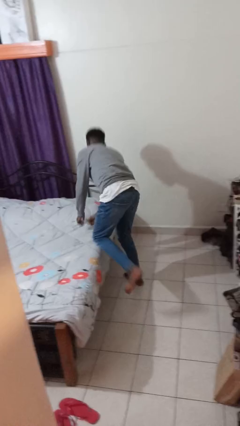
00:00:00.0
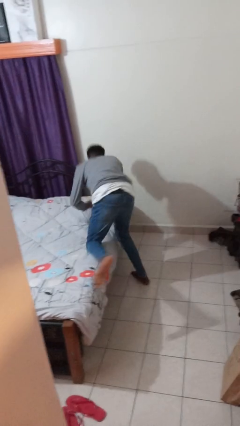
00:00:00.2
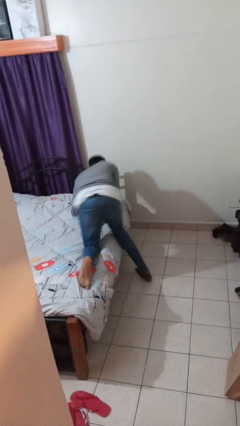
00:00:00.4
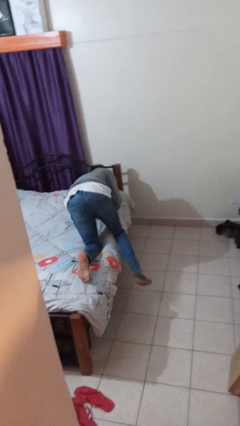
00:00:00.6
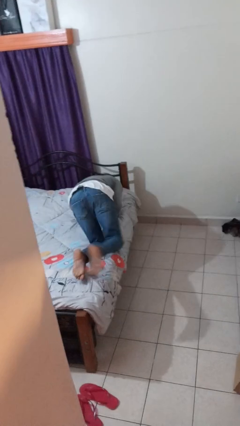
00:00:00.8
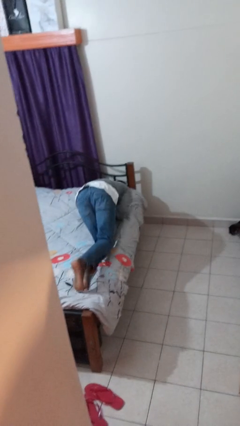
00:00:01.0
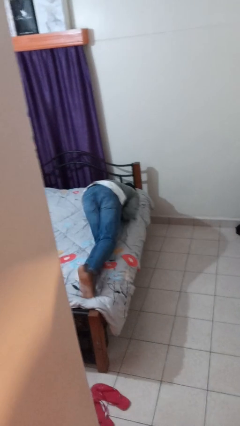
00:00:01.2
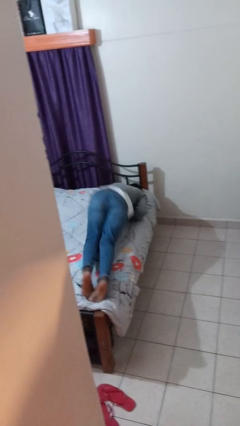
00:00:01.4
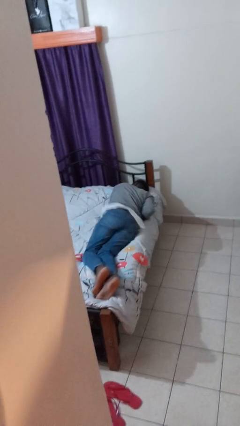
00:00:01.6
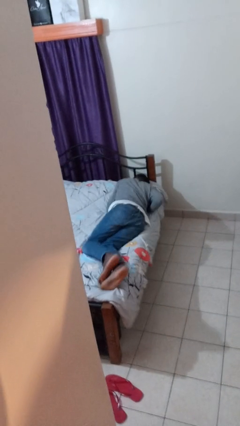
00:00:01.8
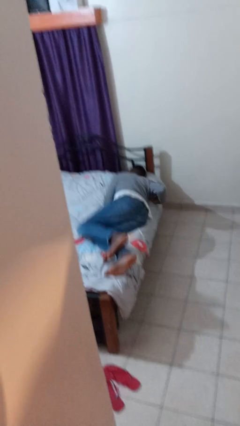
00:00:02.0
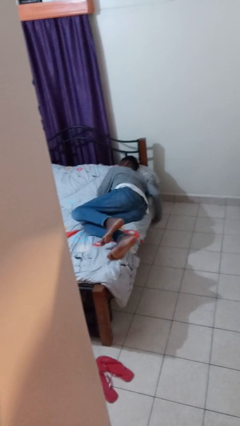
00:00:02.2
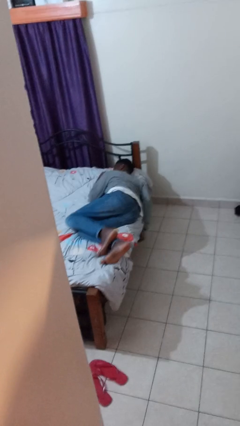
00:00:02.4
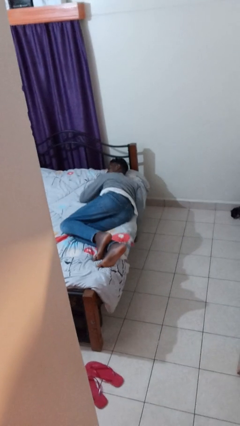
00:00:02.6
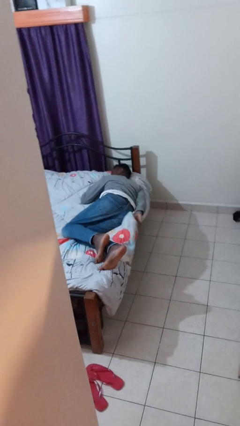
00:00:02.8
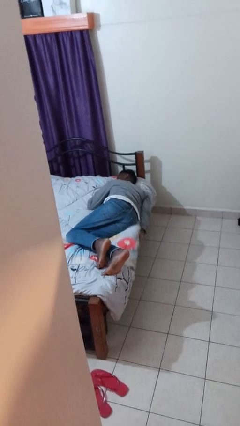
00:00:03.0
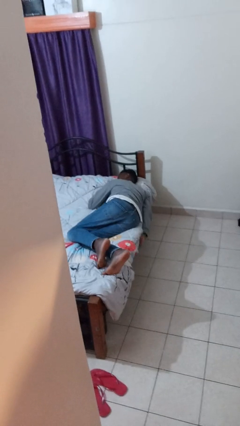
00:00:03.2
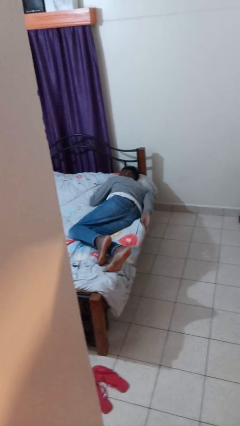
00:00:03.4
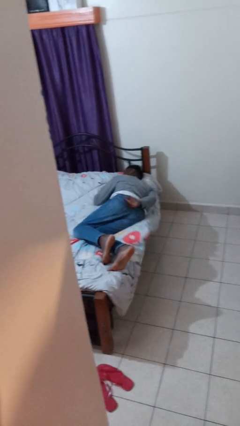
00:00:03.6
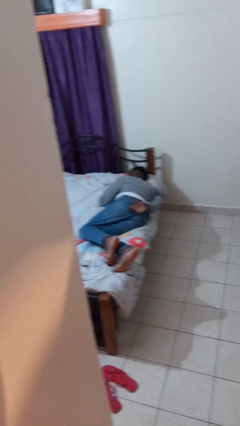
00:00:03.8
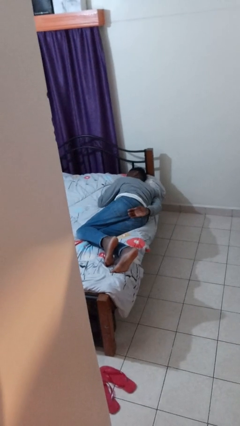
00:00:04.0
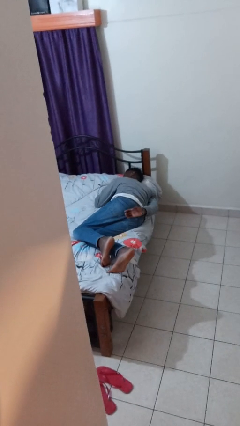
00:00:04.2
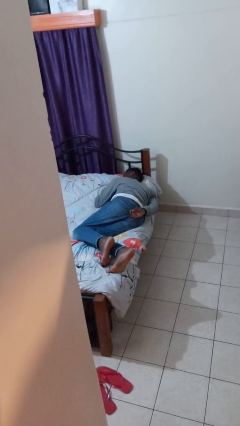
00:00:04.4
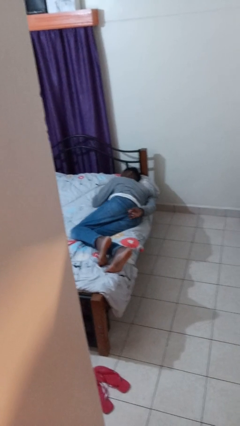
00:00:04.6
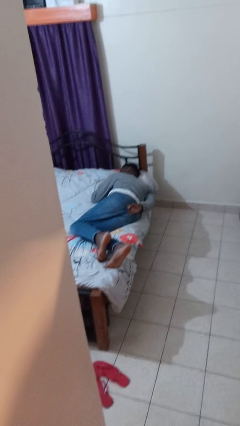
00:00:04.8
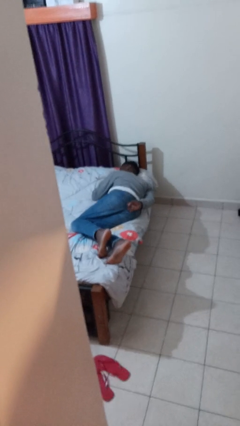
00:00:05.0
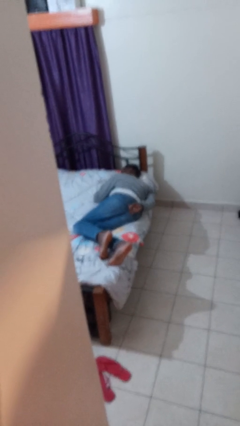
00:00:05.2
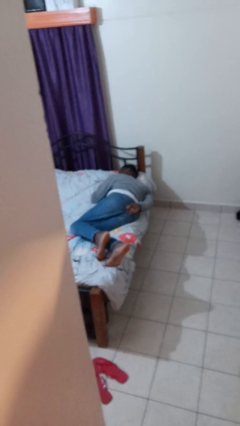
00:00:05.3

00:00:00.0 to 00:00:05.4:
person lies down on bed

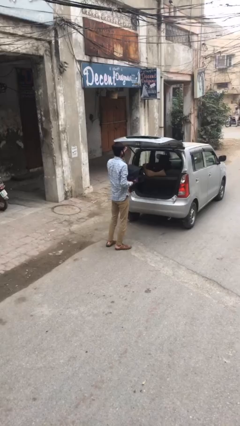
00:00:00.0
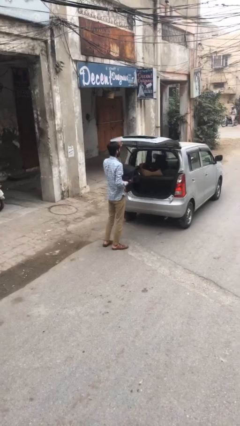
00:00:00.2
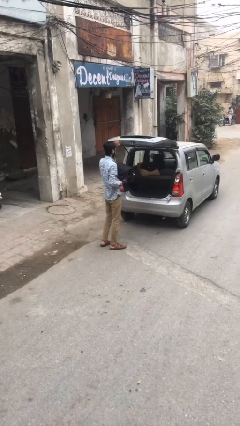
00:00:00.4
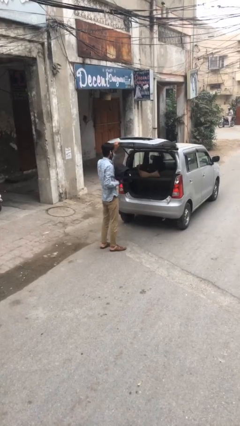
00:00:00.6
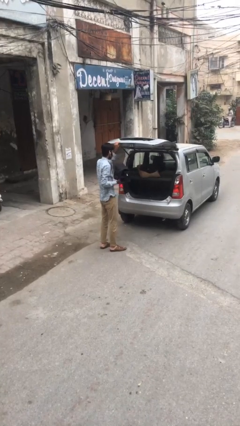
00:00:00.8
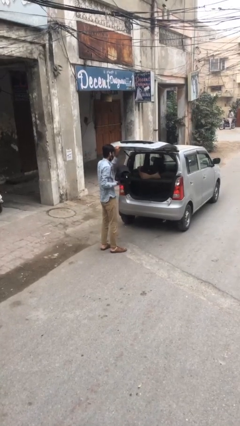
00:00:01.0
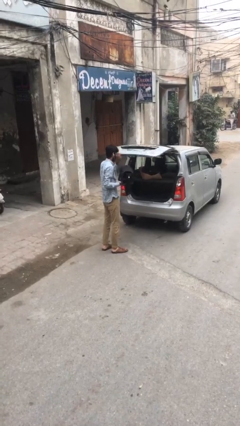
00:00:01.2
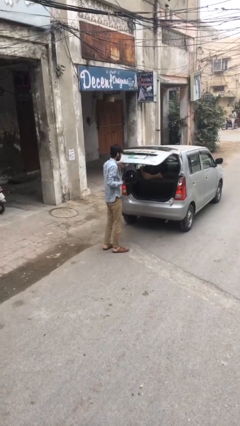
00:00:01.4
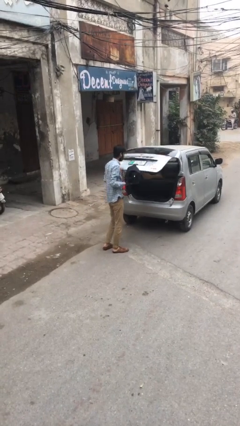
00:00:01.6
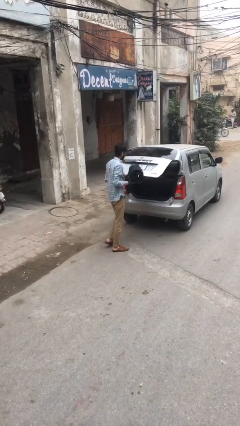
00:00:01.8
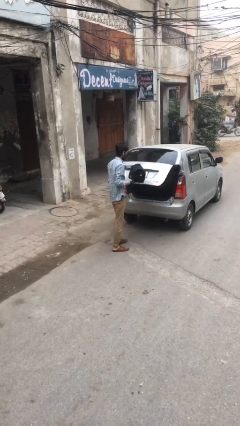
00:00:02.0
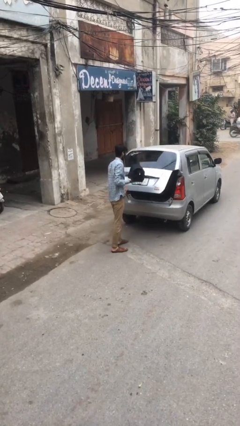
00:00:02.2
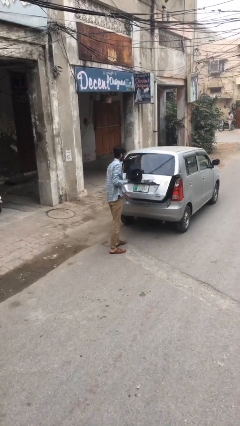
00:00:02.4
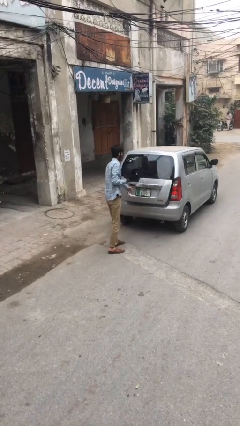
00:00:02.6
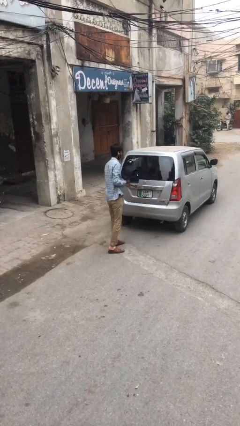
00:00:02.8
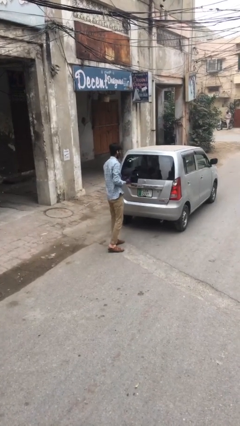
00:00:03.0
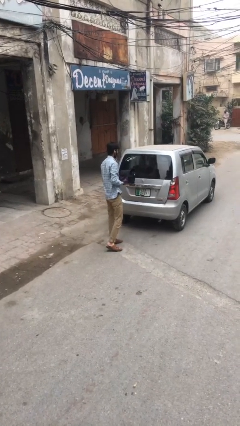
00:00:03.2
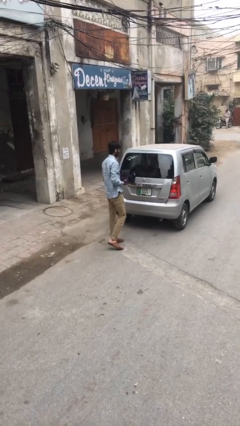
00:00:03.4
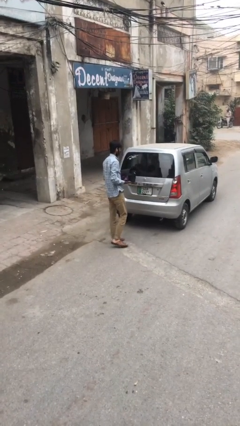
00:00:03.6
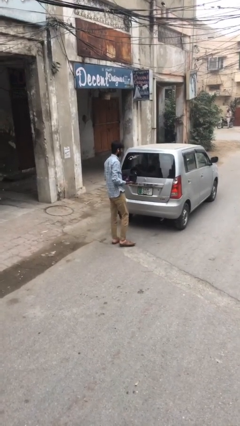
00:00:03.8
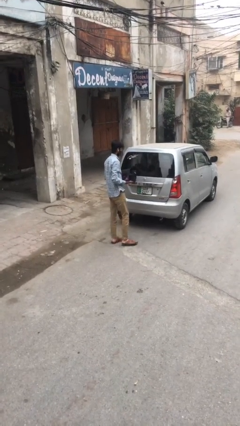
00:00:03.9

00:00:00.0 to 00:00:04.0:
person closes car trunk

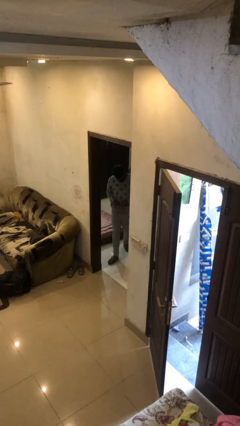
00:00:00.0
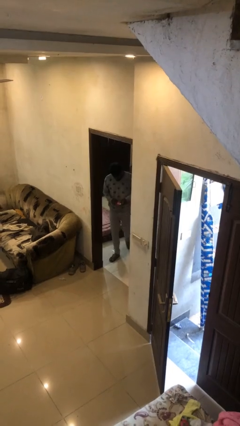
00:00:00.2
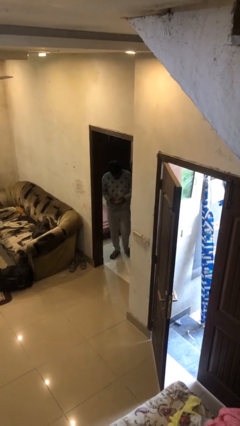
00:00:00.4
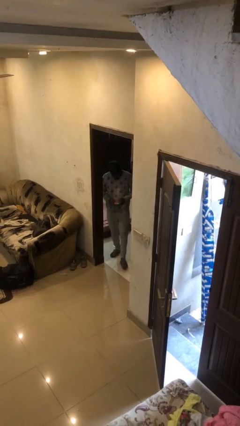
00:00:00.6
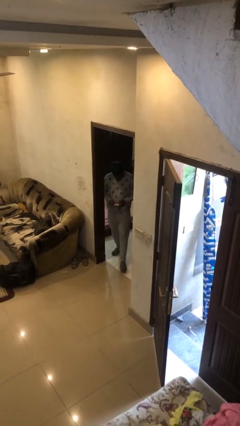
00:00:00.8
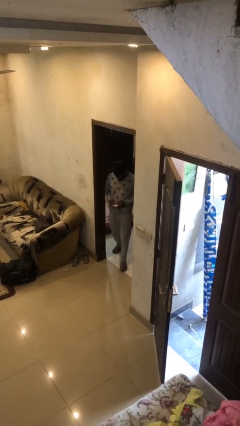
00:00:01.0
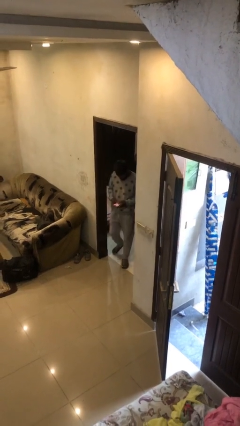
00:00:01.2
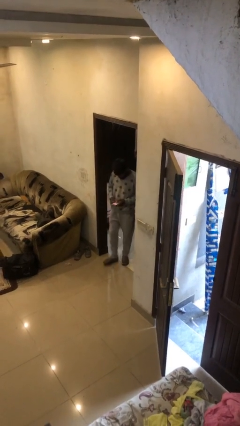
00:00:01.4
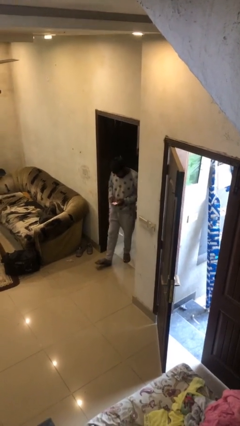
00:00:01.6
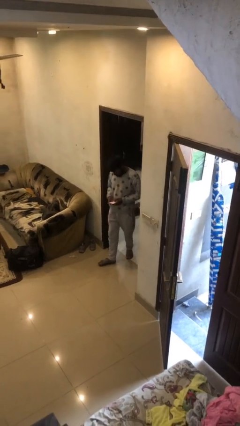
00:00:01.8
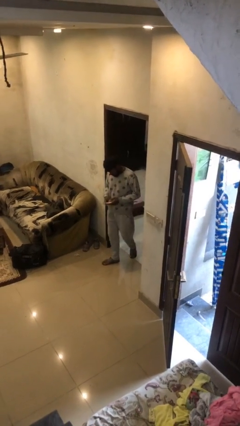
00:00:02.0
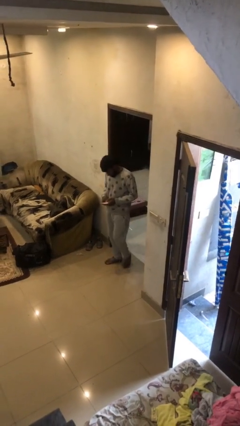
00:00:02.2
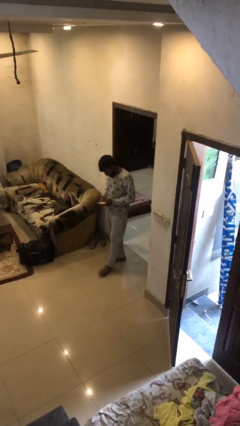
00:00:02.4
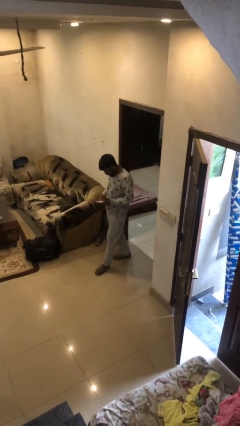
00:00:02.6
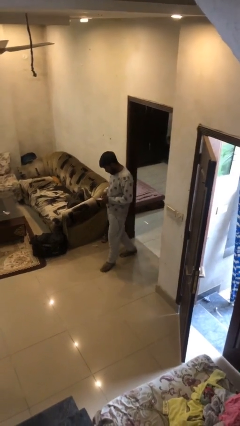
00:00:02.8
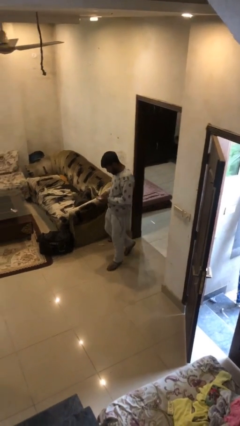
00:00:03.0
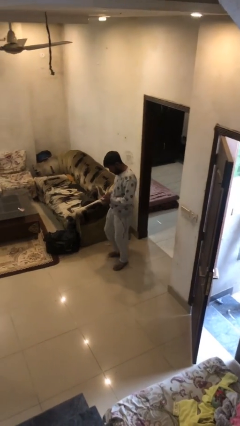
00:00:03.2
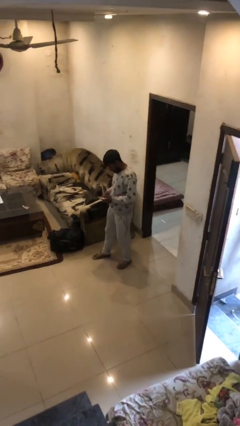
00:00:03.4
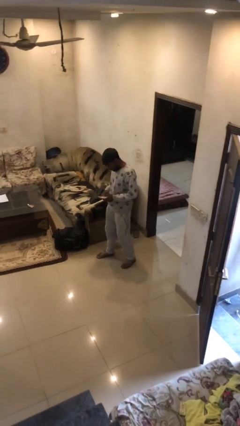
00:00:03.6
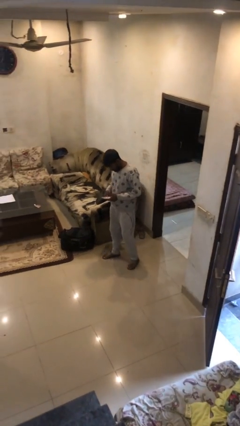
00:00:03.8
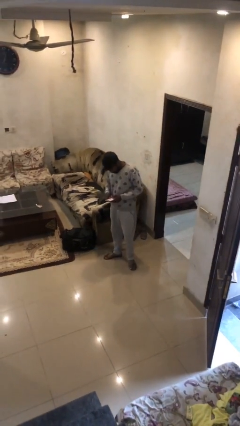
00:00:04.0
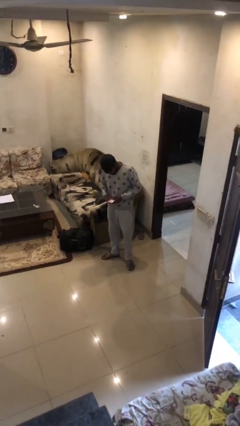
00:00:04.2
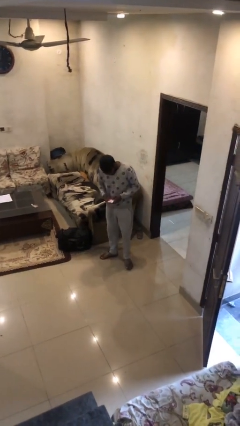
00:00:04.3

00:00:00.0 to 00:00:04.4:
person enters scene through structure

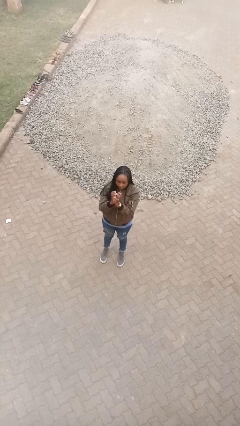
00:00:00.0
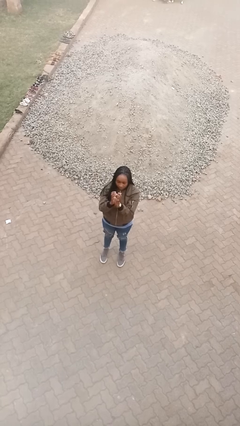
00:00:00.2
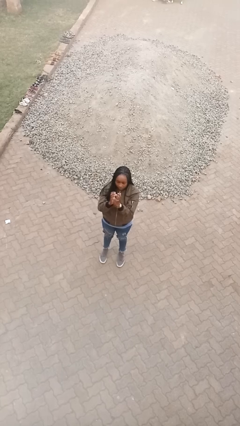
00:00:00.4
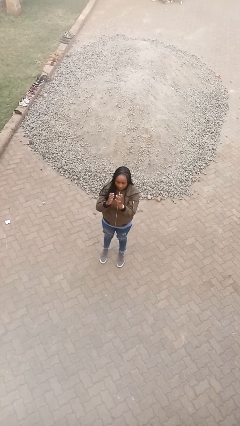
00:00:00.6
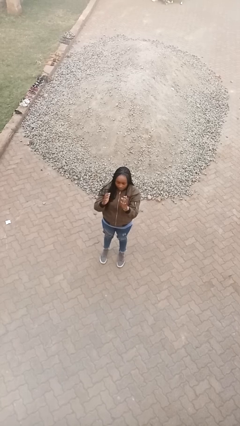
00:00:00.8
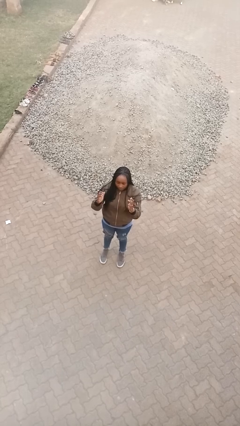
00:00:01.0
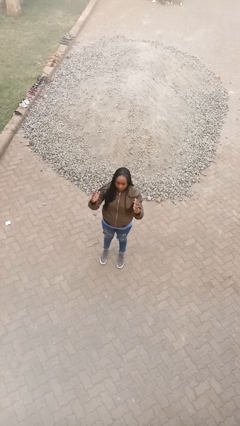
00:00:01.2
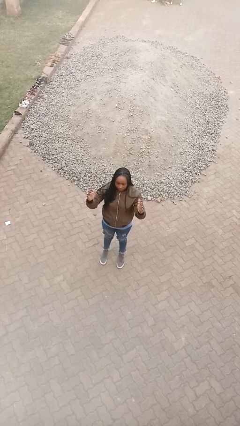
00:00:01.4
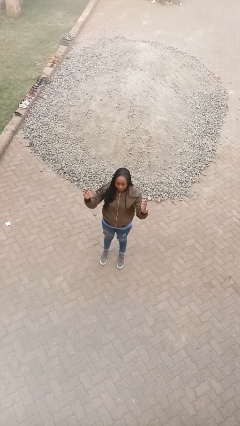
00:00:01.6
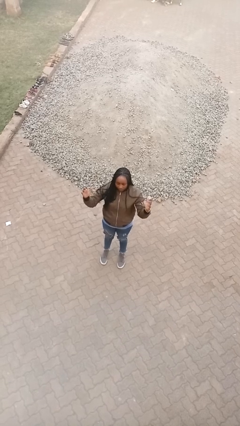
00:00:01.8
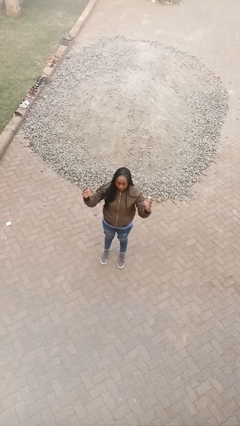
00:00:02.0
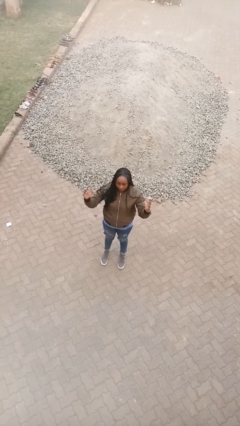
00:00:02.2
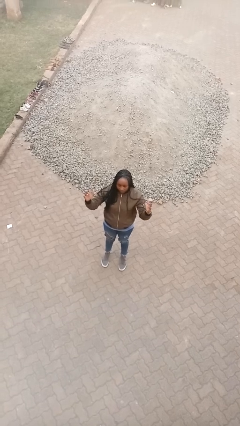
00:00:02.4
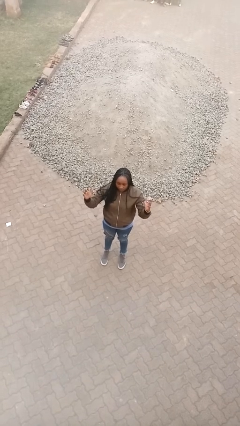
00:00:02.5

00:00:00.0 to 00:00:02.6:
person gestures zoom out

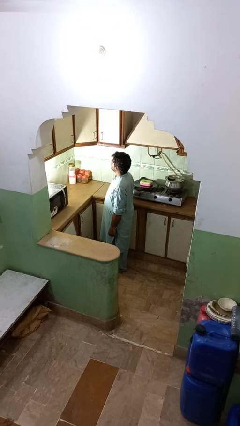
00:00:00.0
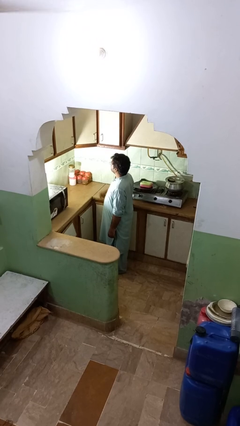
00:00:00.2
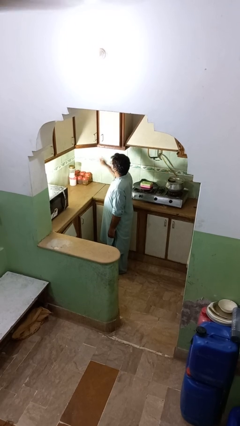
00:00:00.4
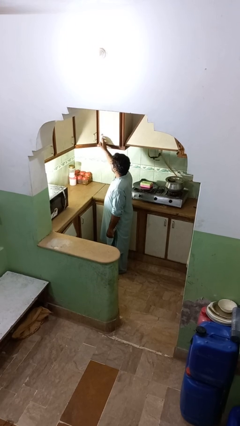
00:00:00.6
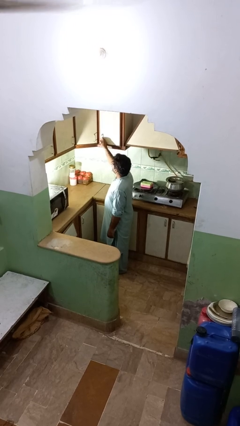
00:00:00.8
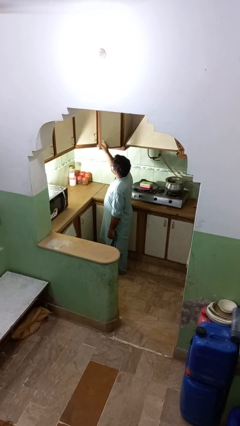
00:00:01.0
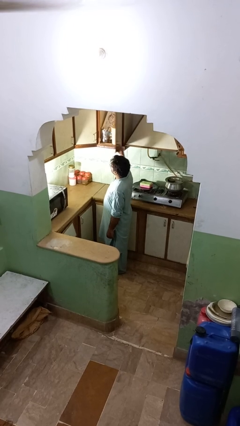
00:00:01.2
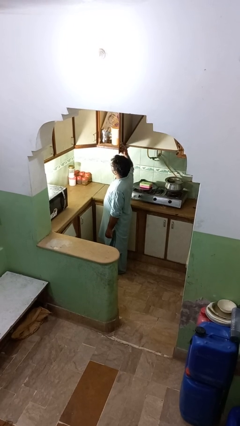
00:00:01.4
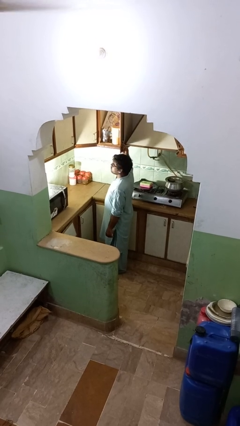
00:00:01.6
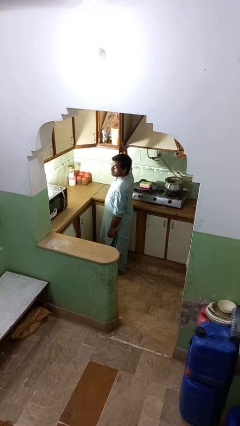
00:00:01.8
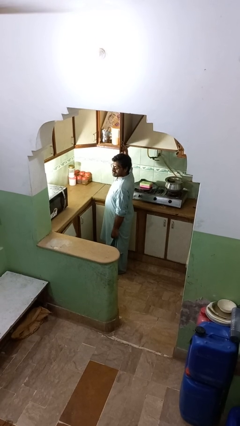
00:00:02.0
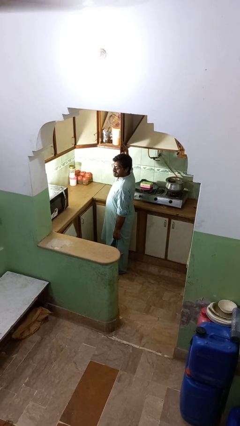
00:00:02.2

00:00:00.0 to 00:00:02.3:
person opens kitchen drawer
